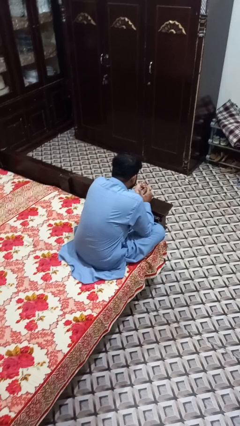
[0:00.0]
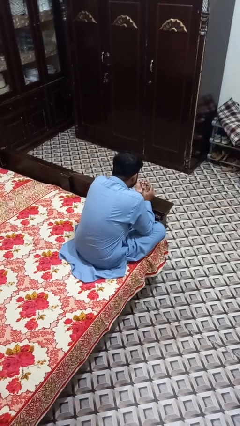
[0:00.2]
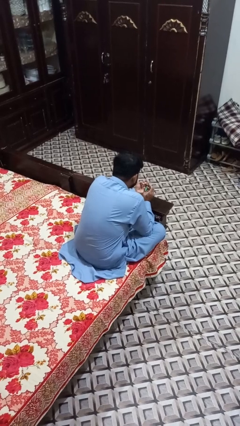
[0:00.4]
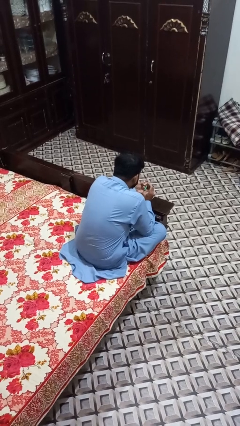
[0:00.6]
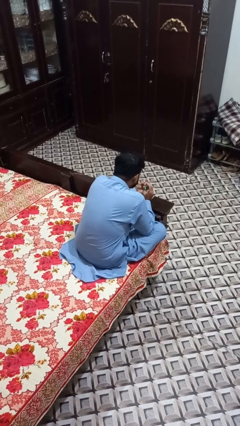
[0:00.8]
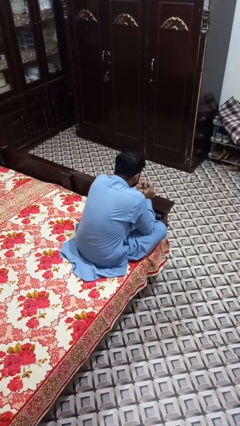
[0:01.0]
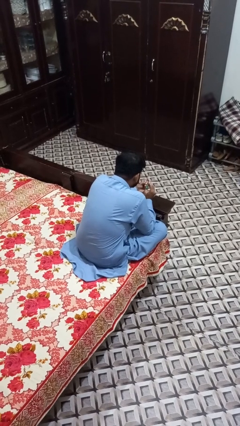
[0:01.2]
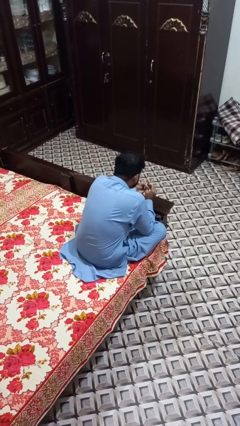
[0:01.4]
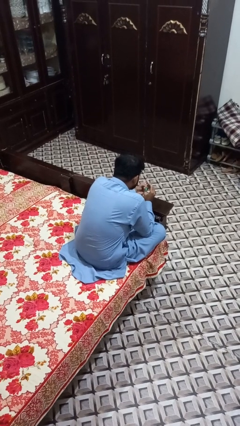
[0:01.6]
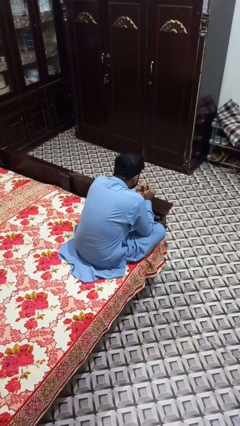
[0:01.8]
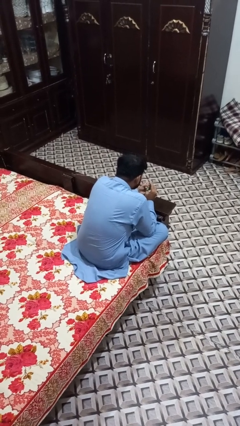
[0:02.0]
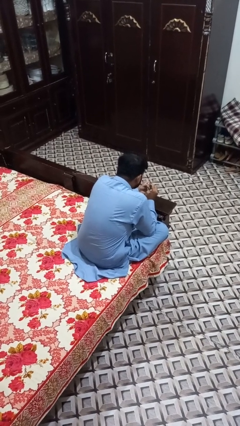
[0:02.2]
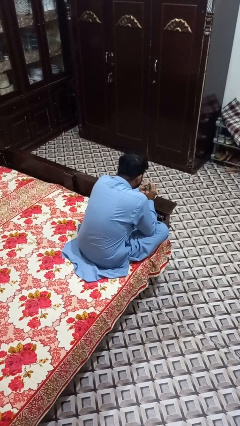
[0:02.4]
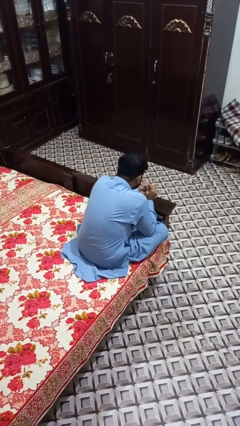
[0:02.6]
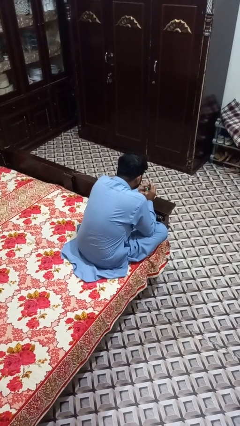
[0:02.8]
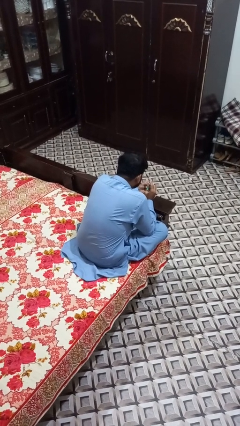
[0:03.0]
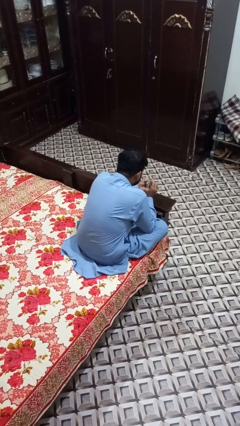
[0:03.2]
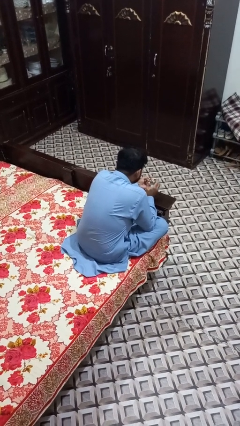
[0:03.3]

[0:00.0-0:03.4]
person clips fingernails

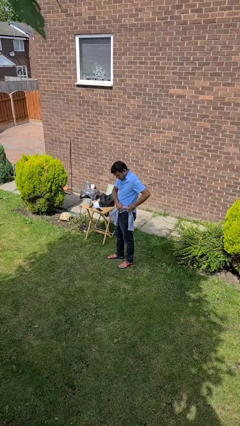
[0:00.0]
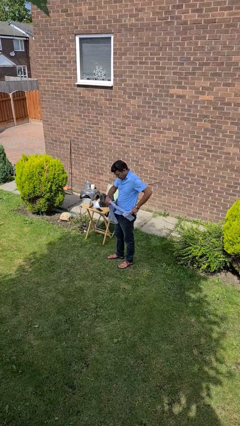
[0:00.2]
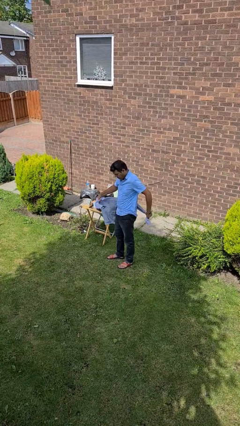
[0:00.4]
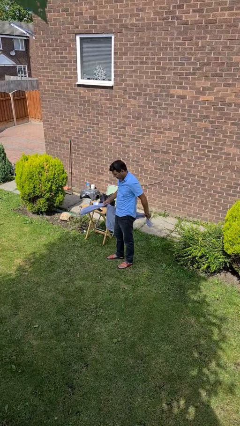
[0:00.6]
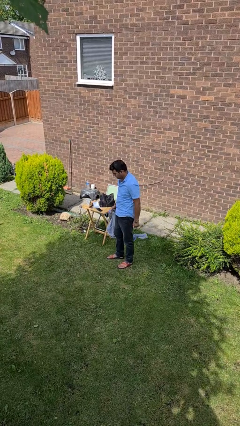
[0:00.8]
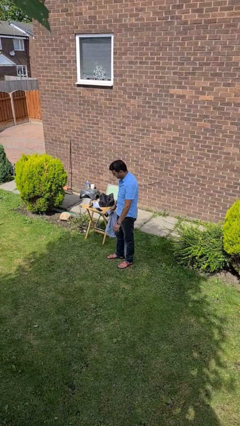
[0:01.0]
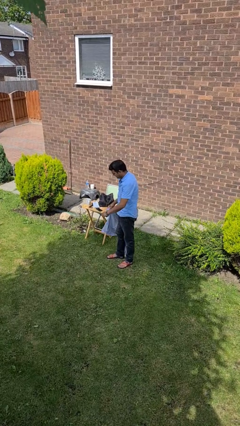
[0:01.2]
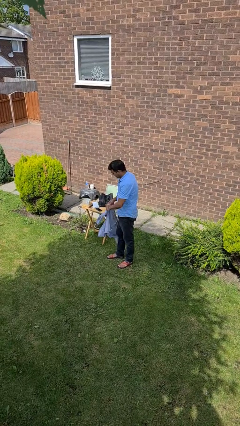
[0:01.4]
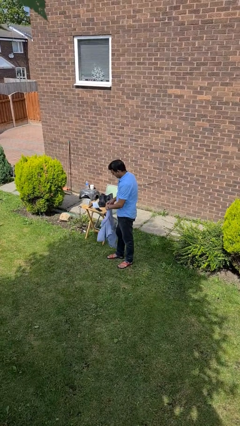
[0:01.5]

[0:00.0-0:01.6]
person unties jacket around waist

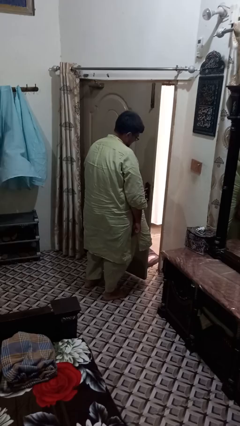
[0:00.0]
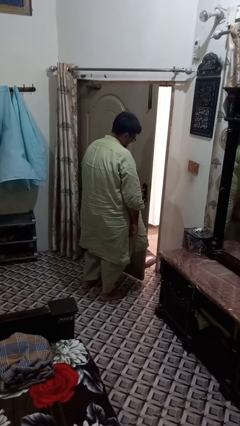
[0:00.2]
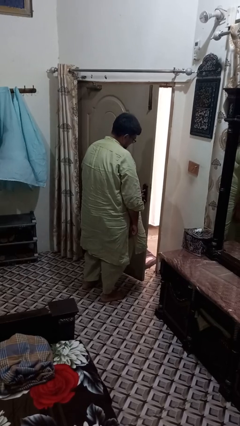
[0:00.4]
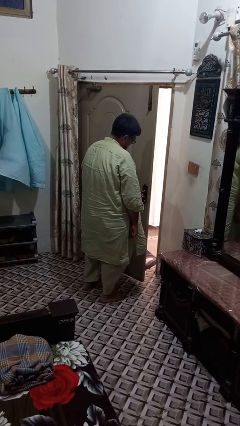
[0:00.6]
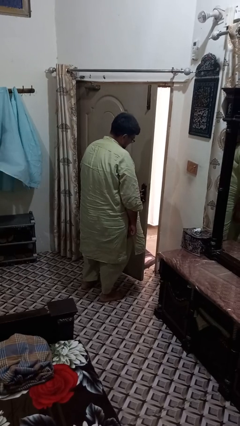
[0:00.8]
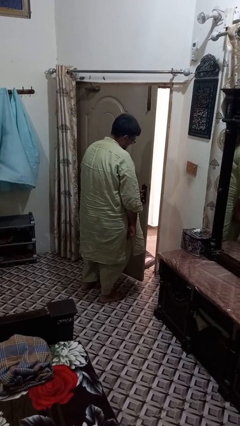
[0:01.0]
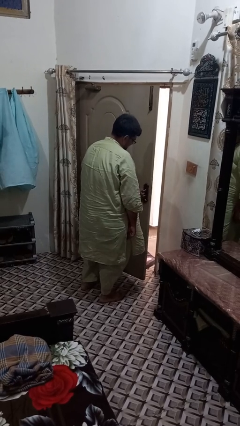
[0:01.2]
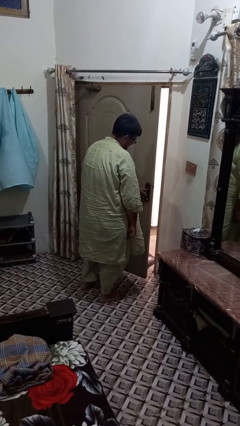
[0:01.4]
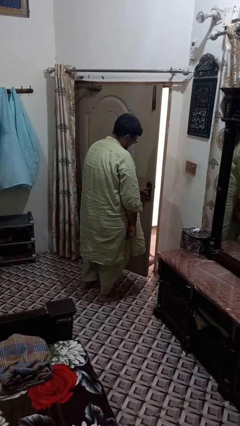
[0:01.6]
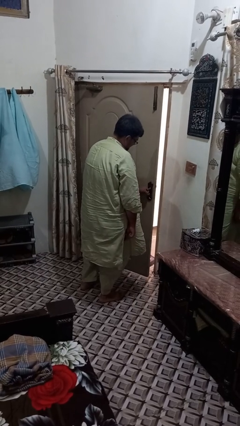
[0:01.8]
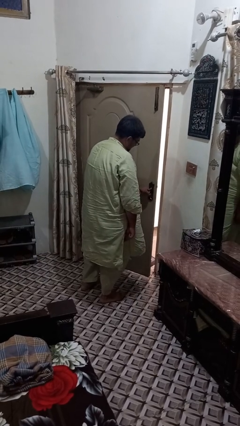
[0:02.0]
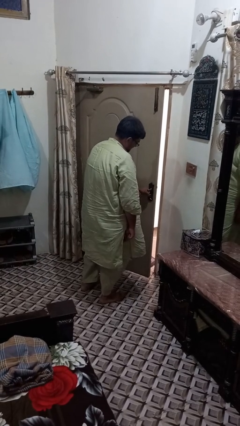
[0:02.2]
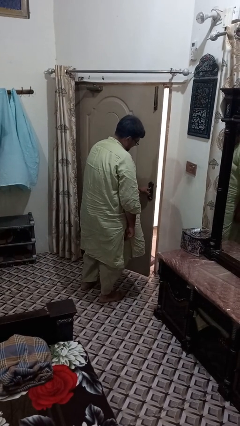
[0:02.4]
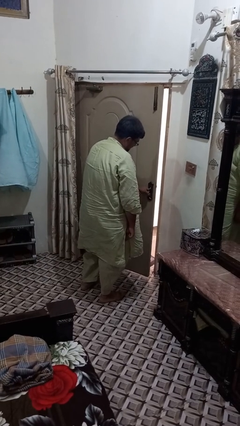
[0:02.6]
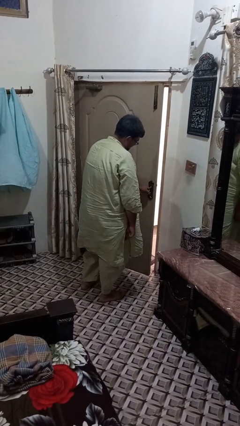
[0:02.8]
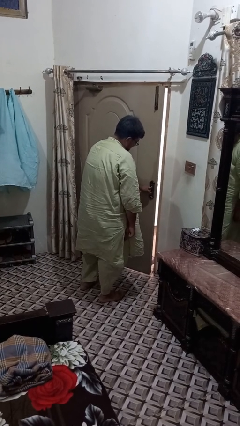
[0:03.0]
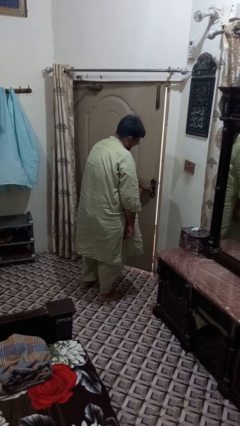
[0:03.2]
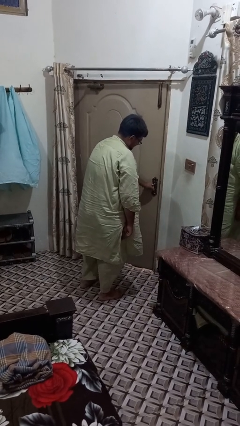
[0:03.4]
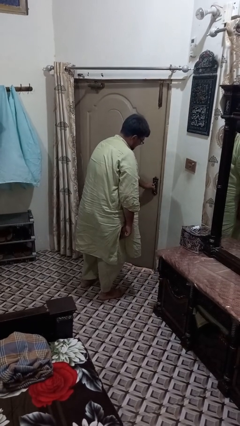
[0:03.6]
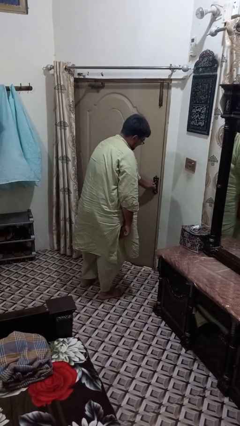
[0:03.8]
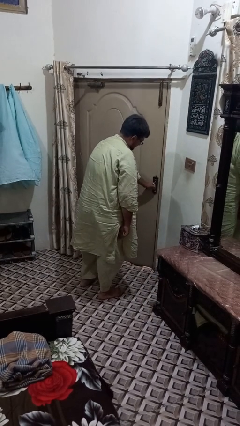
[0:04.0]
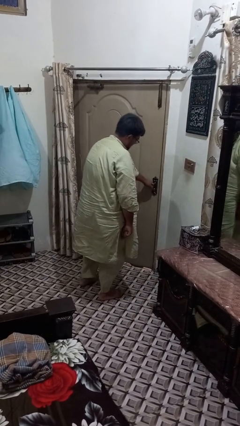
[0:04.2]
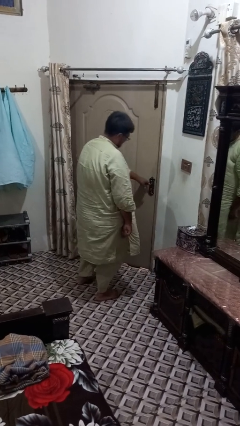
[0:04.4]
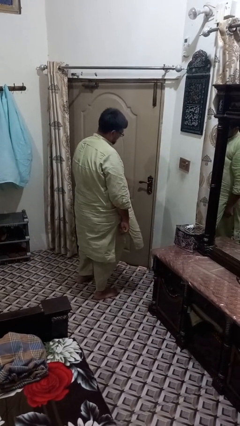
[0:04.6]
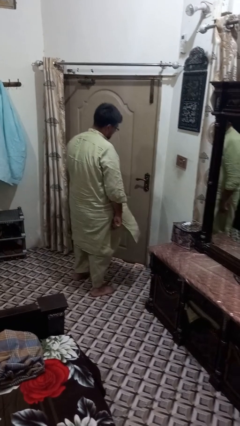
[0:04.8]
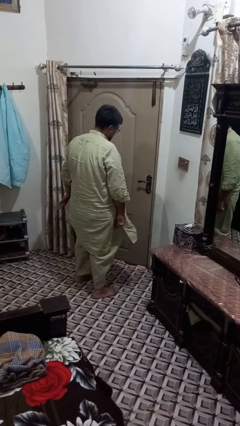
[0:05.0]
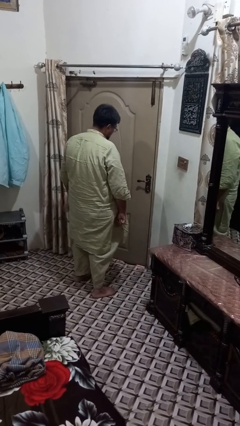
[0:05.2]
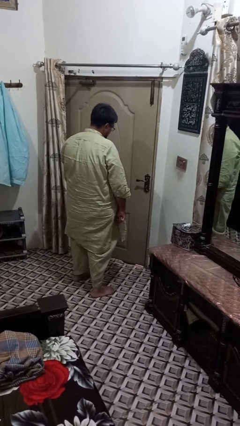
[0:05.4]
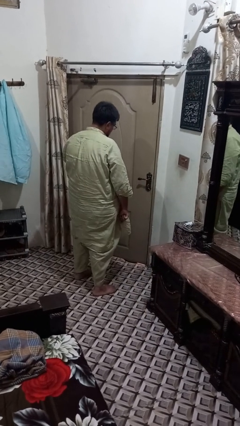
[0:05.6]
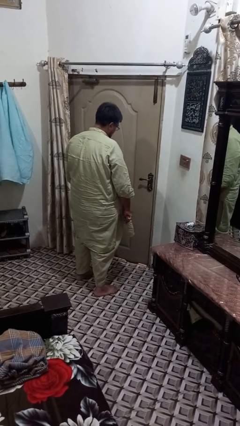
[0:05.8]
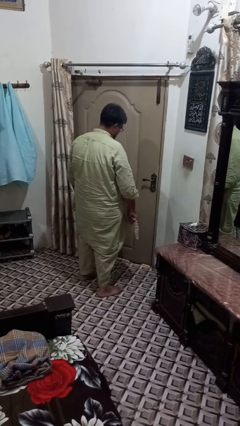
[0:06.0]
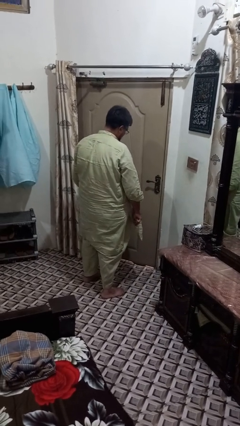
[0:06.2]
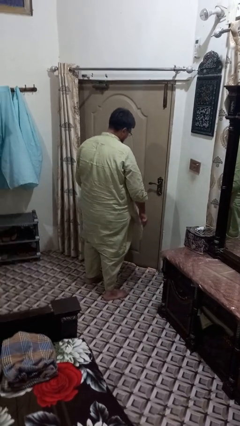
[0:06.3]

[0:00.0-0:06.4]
person closes facility door

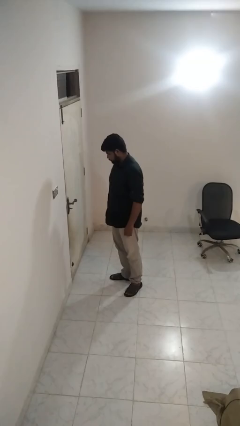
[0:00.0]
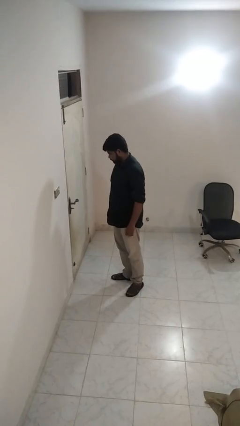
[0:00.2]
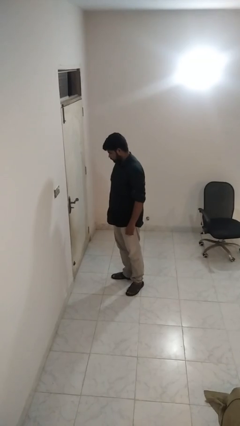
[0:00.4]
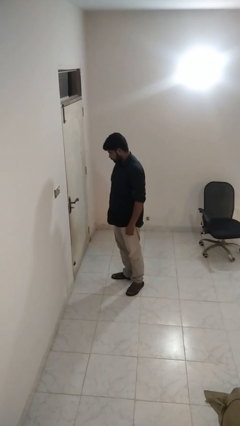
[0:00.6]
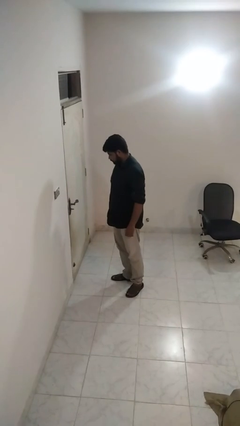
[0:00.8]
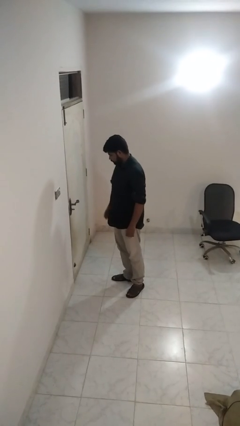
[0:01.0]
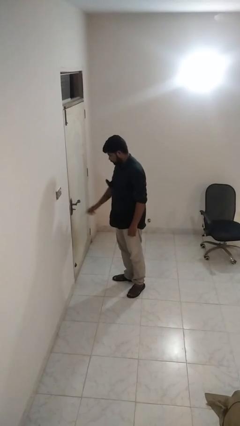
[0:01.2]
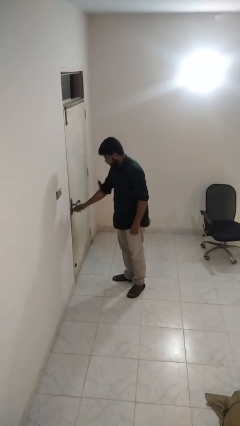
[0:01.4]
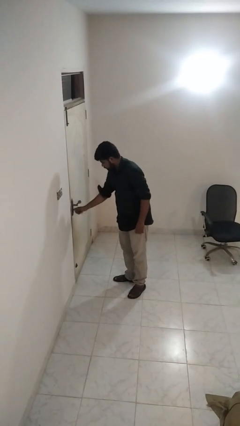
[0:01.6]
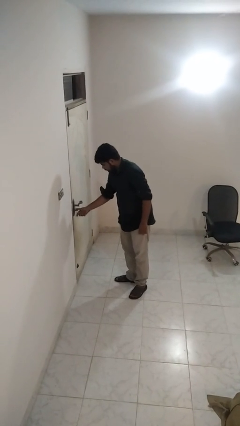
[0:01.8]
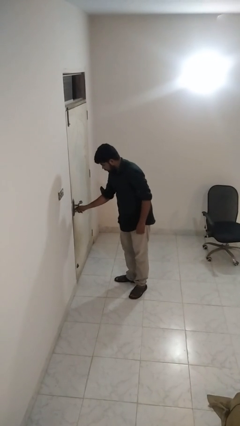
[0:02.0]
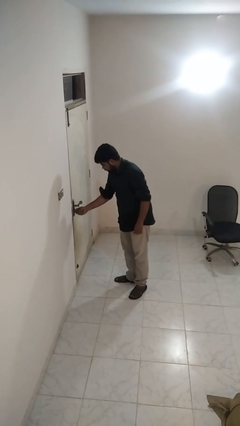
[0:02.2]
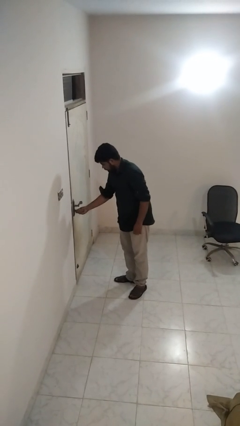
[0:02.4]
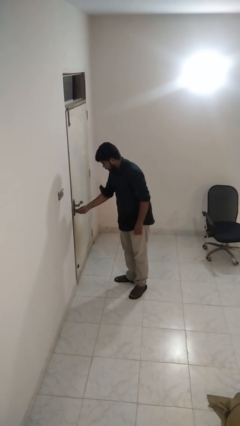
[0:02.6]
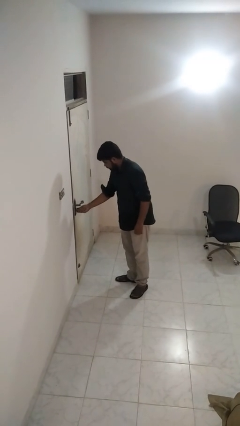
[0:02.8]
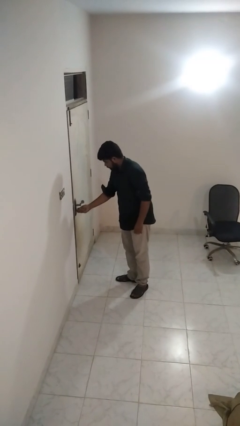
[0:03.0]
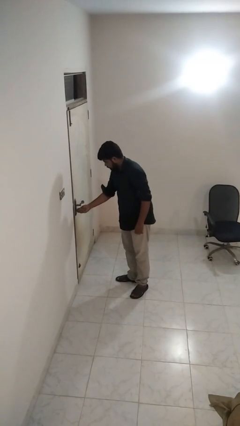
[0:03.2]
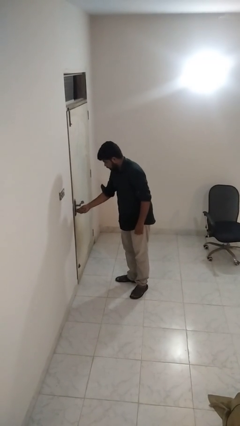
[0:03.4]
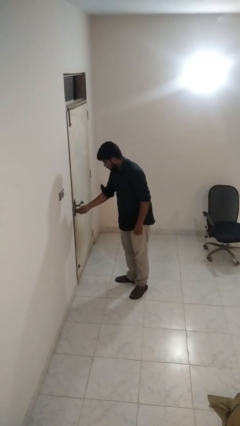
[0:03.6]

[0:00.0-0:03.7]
person unlocks door with keys

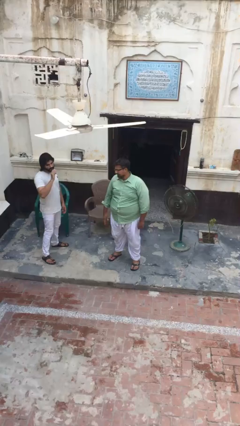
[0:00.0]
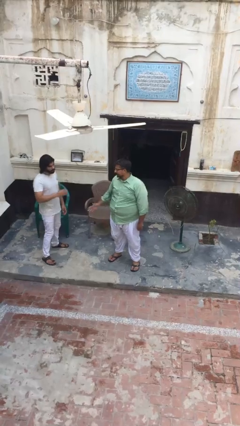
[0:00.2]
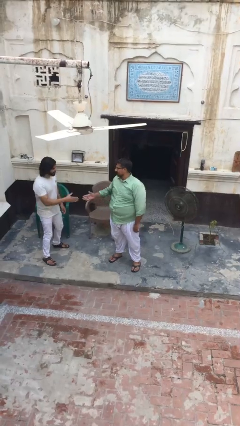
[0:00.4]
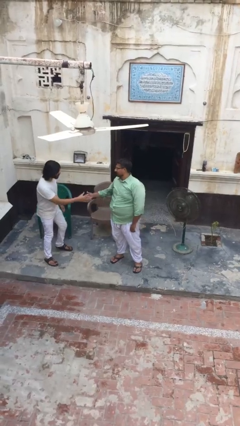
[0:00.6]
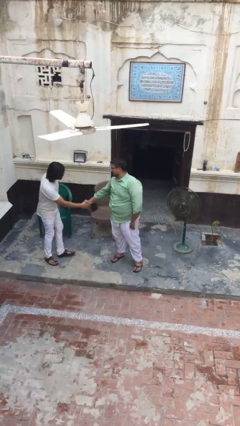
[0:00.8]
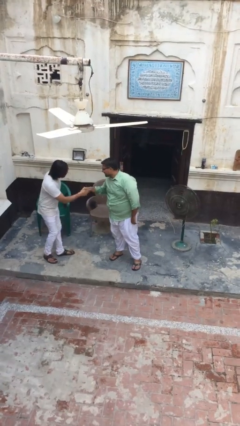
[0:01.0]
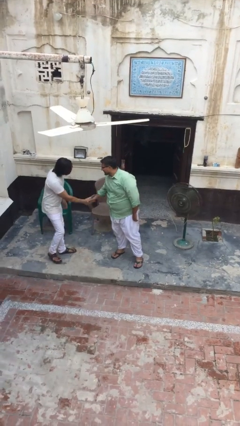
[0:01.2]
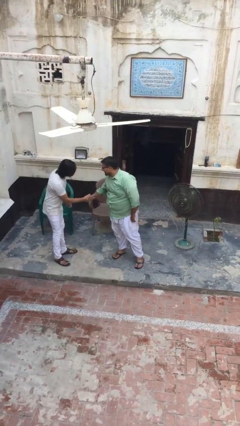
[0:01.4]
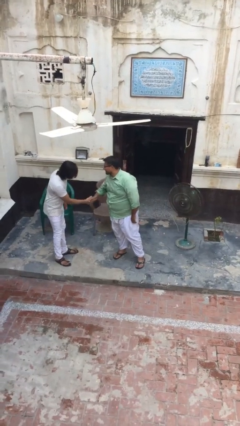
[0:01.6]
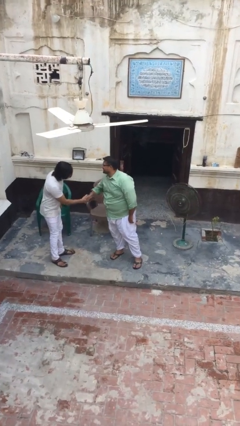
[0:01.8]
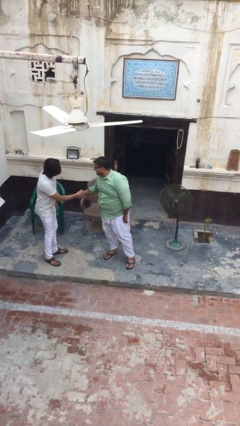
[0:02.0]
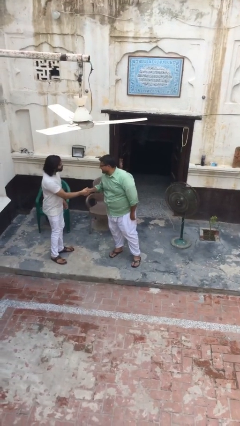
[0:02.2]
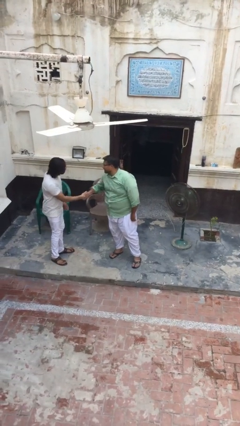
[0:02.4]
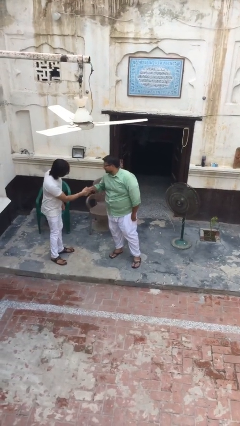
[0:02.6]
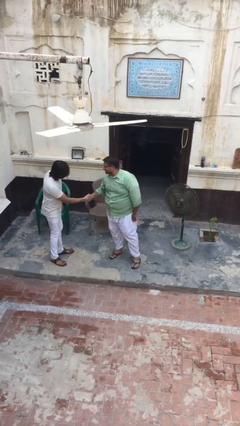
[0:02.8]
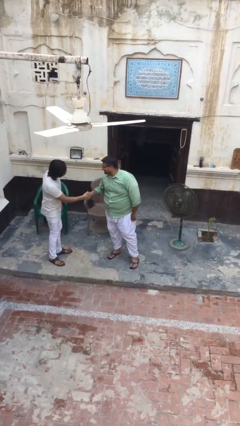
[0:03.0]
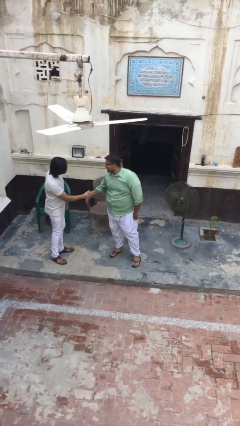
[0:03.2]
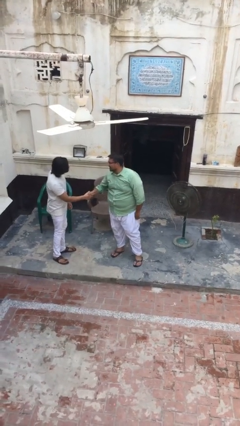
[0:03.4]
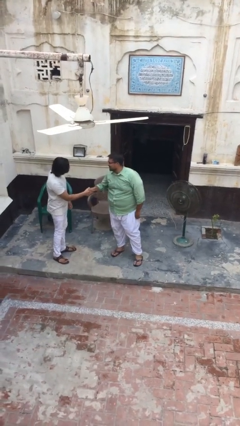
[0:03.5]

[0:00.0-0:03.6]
person shakes hand
